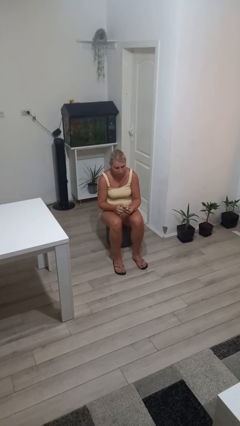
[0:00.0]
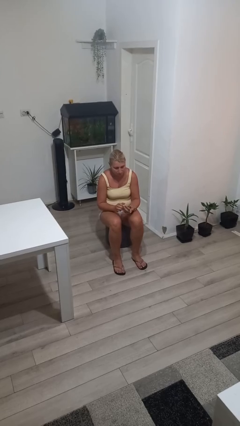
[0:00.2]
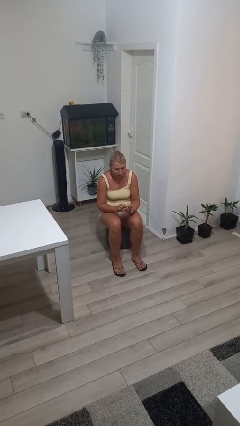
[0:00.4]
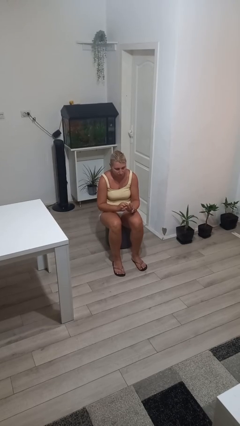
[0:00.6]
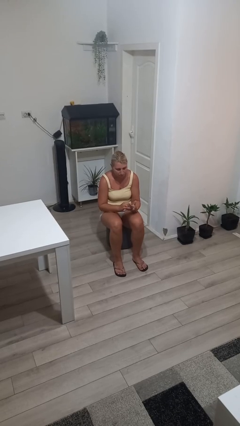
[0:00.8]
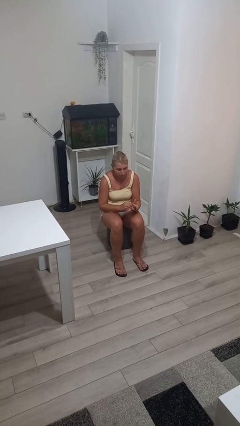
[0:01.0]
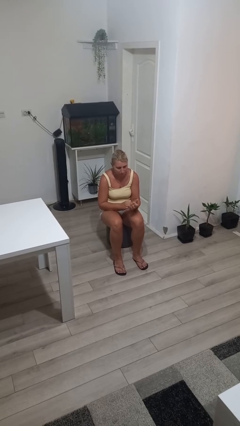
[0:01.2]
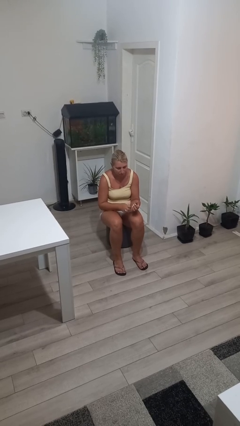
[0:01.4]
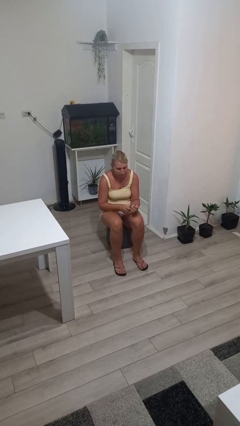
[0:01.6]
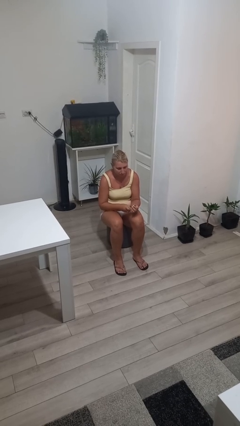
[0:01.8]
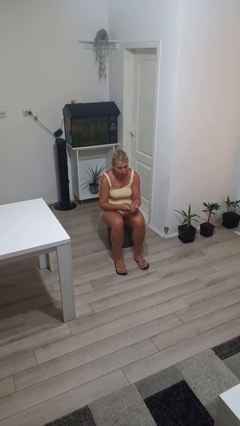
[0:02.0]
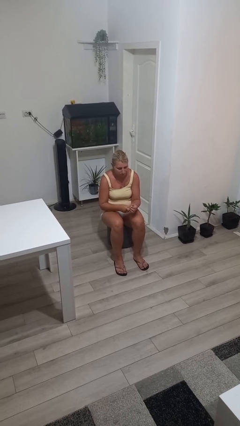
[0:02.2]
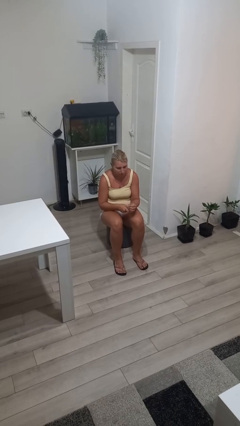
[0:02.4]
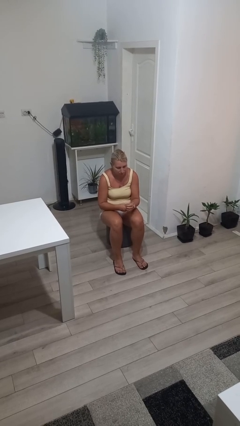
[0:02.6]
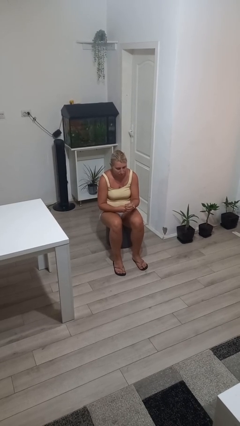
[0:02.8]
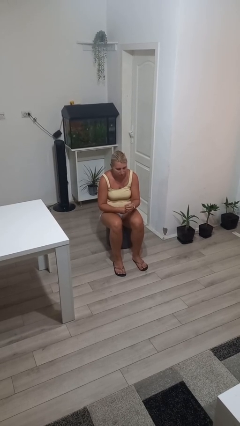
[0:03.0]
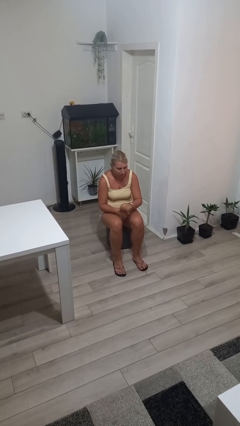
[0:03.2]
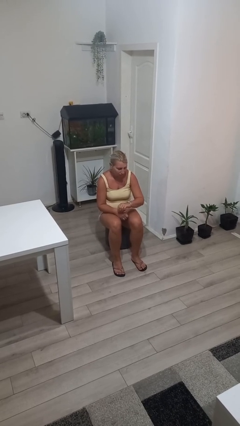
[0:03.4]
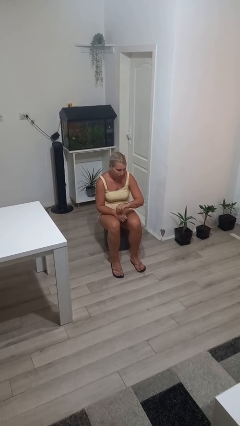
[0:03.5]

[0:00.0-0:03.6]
person puts on wristwatch

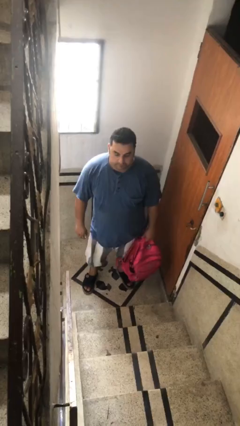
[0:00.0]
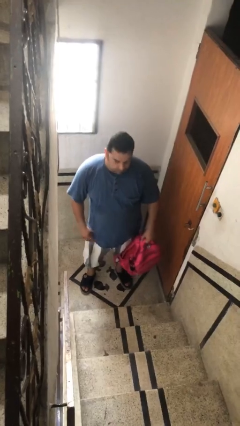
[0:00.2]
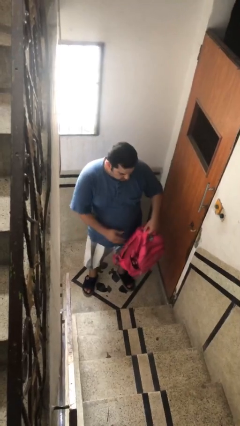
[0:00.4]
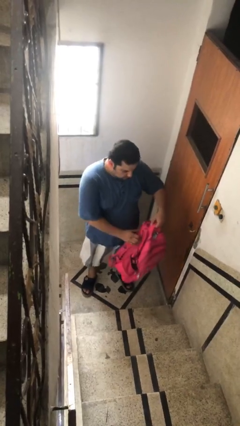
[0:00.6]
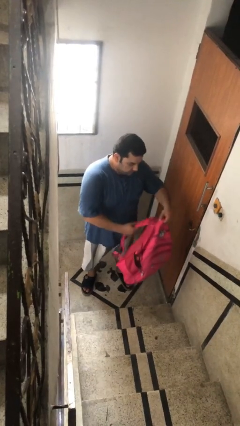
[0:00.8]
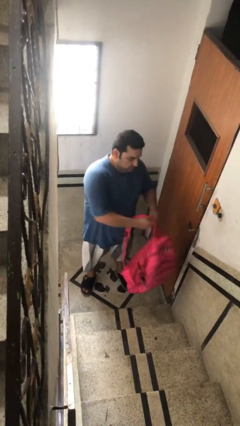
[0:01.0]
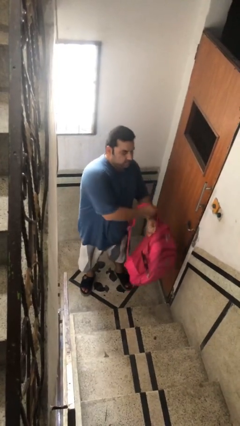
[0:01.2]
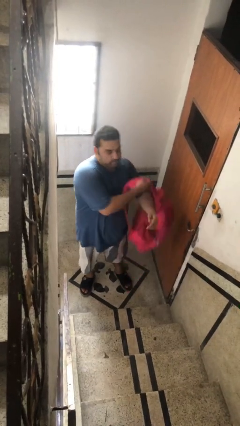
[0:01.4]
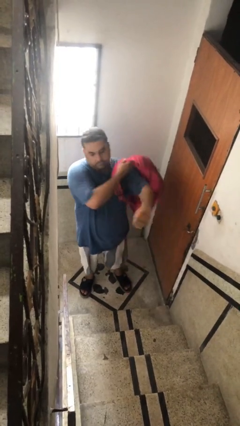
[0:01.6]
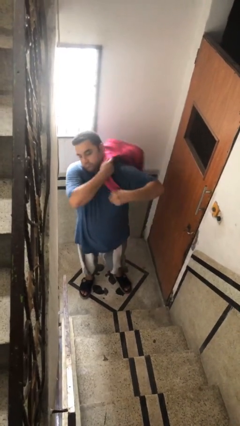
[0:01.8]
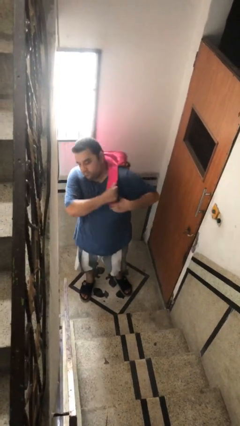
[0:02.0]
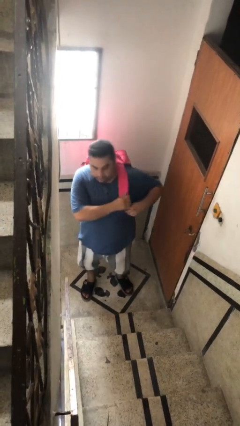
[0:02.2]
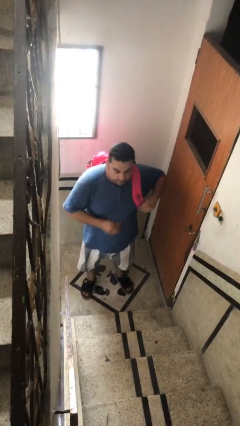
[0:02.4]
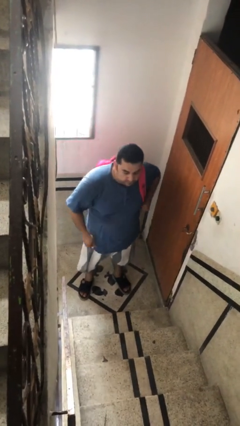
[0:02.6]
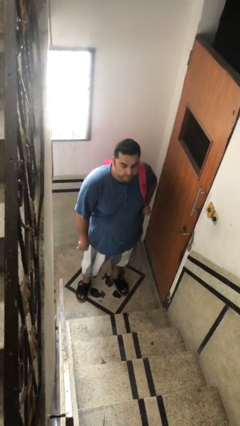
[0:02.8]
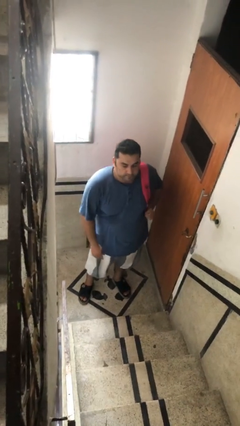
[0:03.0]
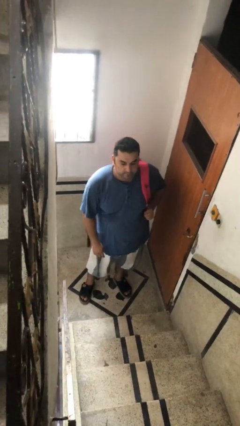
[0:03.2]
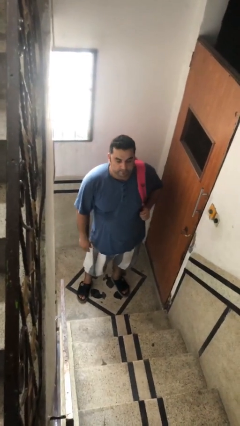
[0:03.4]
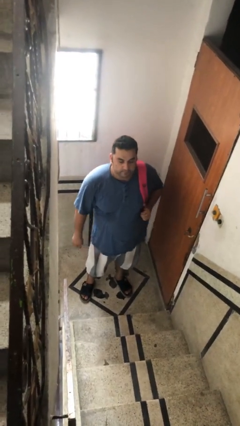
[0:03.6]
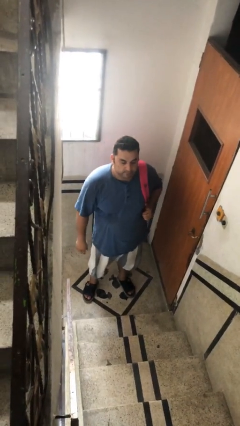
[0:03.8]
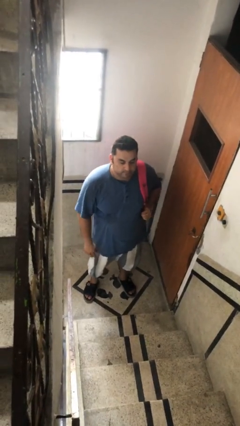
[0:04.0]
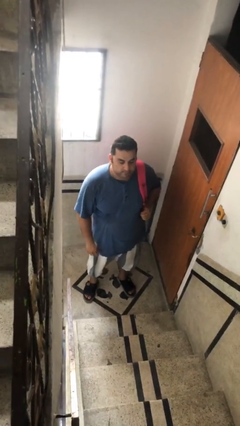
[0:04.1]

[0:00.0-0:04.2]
person puts on backpack

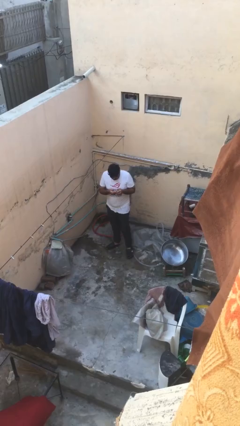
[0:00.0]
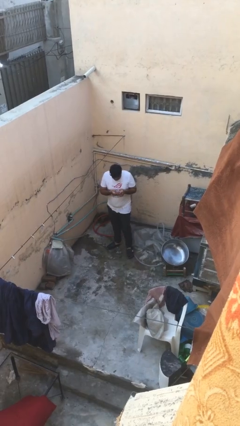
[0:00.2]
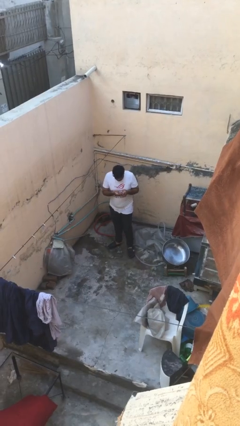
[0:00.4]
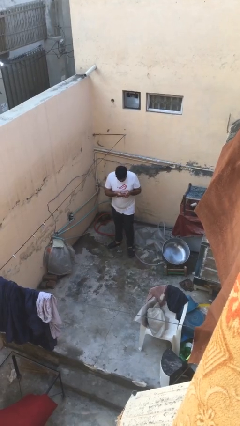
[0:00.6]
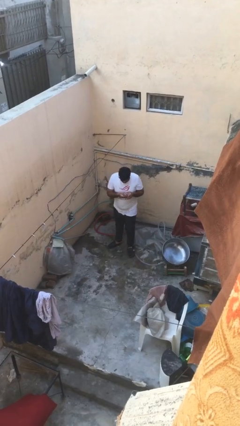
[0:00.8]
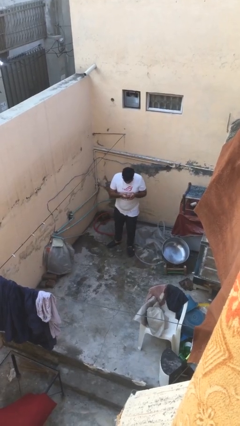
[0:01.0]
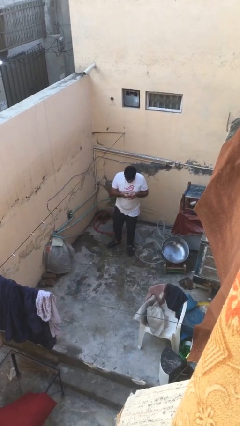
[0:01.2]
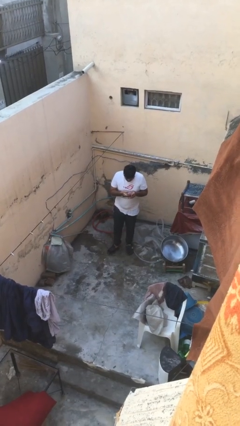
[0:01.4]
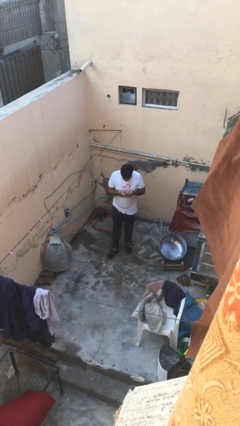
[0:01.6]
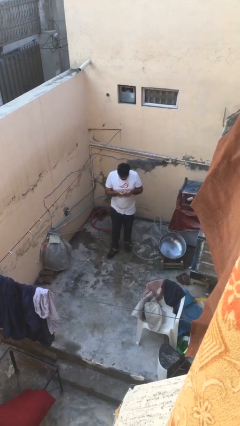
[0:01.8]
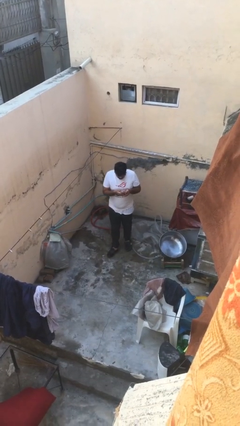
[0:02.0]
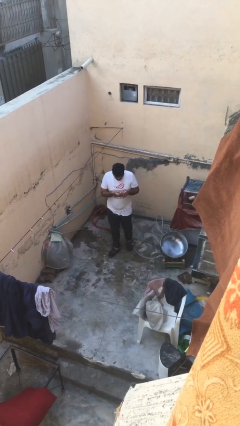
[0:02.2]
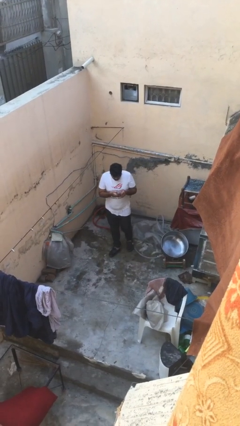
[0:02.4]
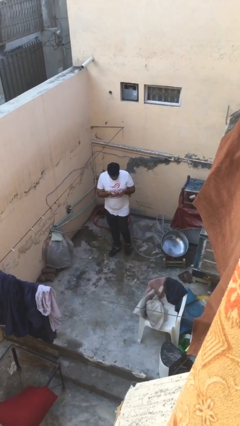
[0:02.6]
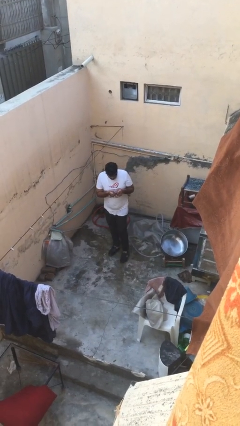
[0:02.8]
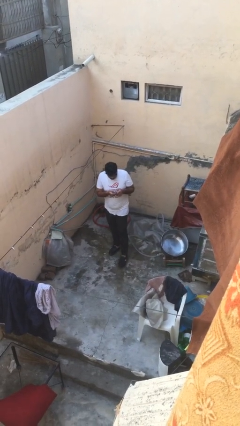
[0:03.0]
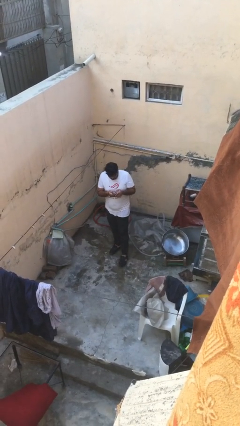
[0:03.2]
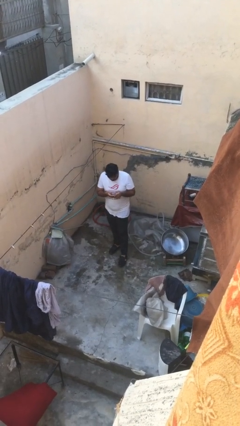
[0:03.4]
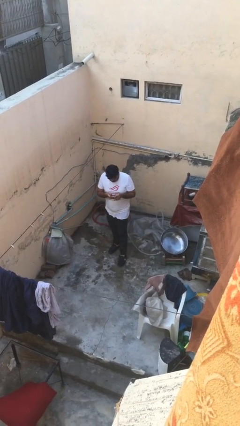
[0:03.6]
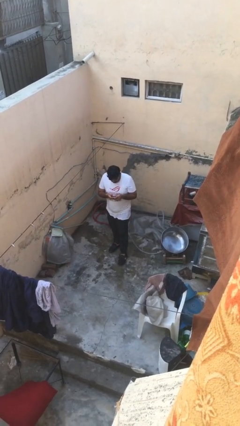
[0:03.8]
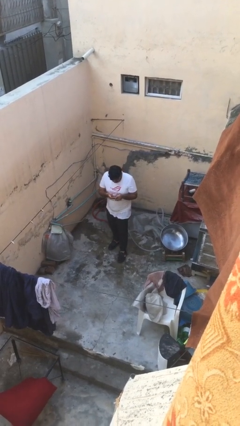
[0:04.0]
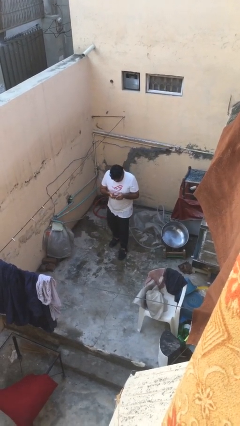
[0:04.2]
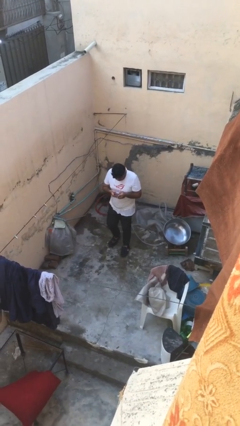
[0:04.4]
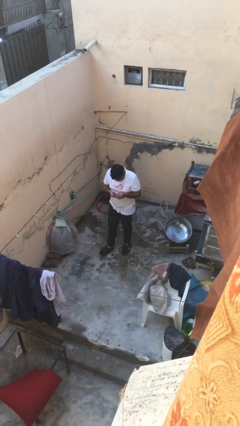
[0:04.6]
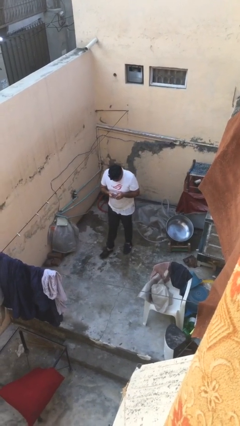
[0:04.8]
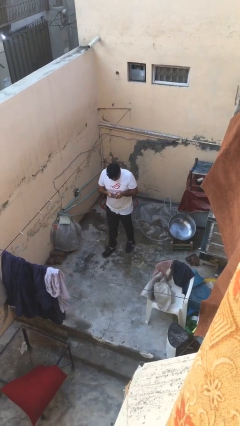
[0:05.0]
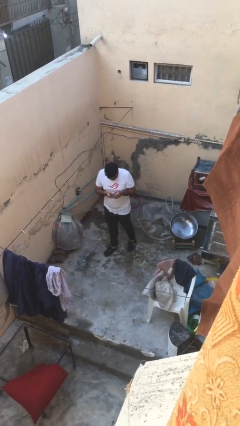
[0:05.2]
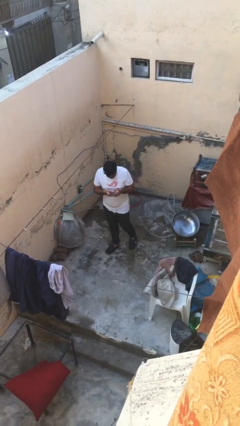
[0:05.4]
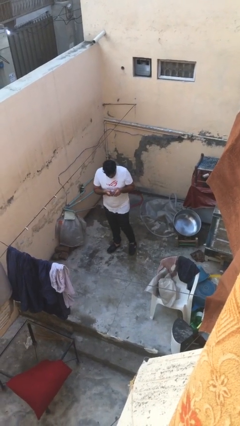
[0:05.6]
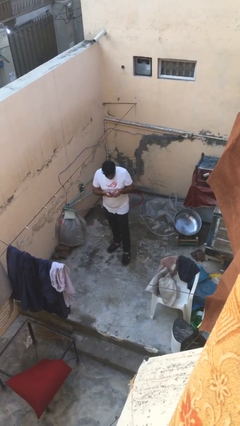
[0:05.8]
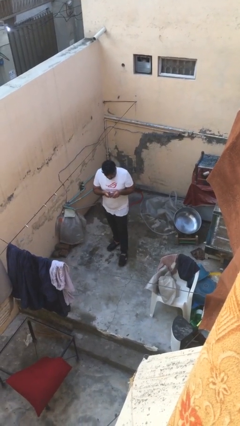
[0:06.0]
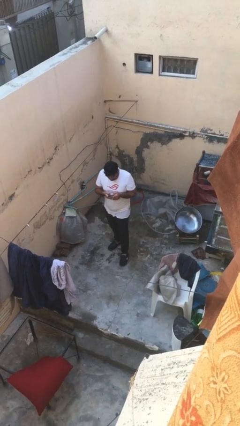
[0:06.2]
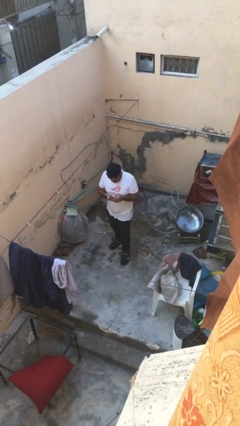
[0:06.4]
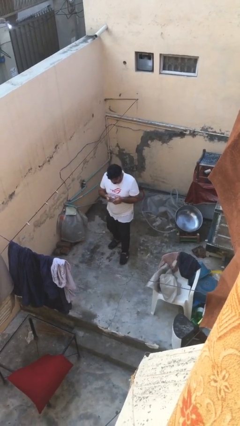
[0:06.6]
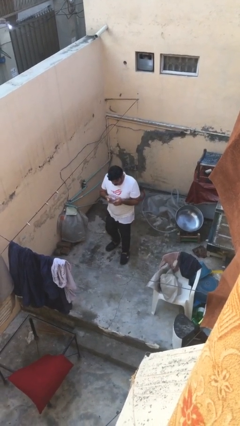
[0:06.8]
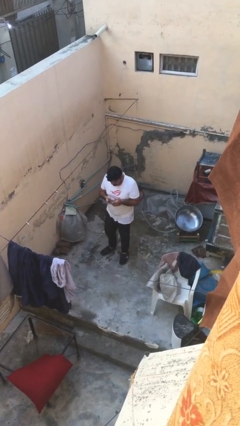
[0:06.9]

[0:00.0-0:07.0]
person texts on phone

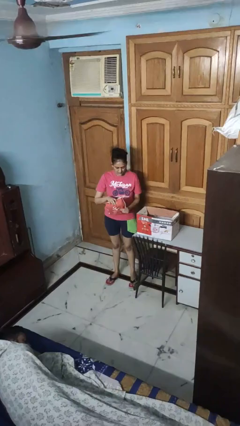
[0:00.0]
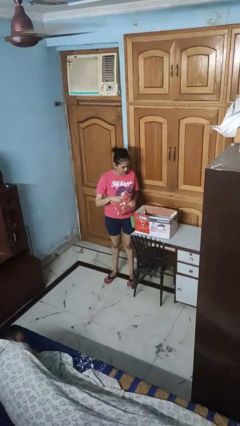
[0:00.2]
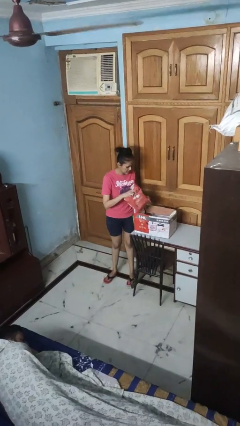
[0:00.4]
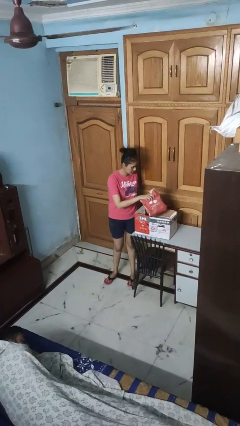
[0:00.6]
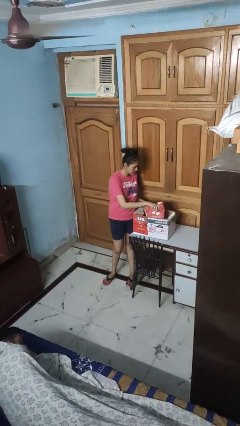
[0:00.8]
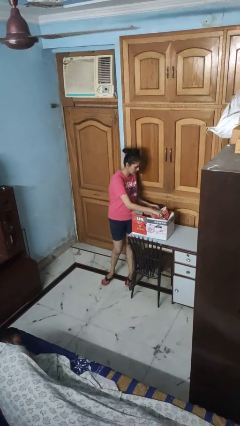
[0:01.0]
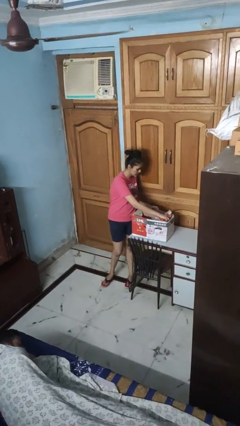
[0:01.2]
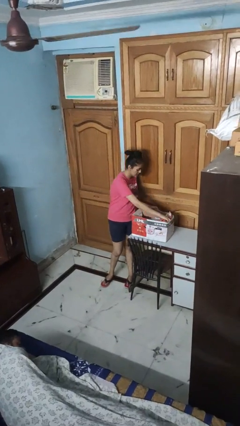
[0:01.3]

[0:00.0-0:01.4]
person puts object into box

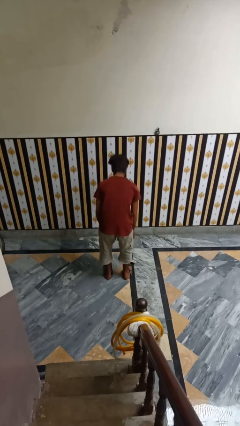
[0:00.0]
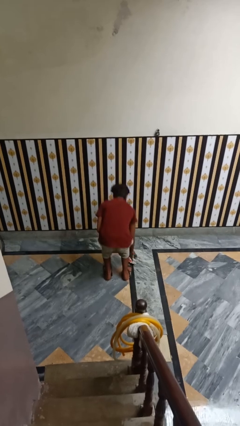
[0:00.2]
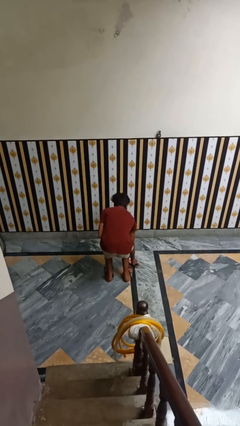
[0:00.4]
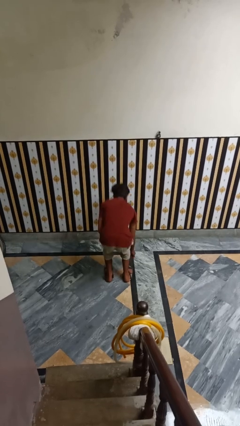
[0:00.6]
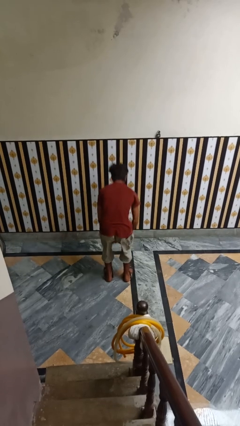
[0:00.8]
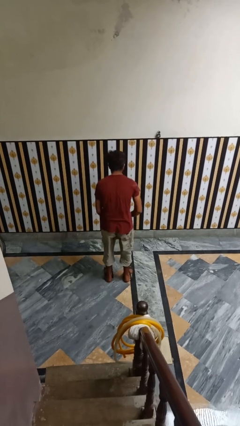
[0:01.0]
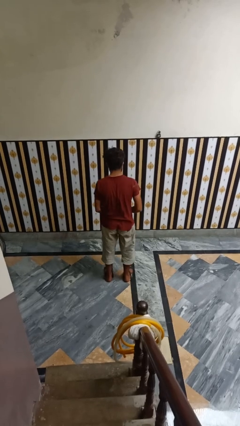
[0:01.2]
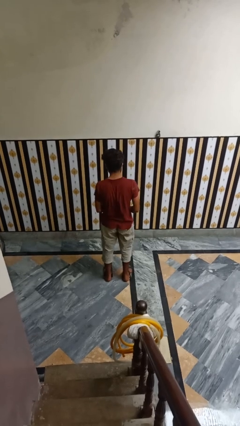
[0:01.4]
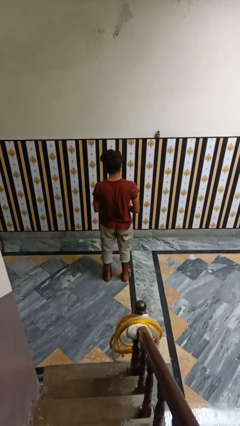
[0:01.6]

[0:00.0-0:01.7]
person picks up object from floor
